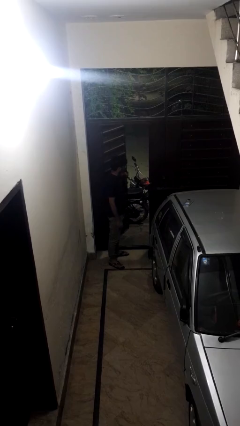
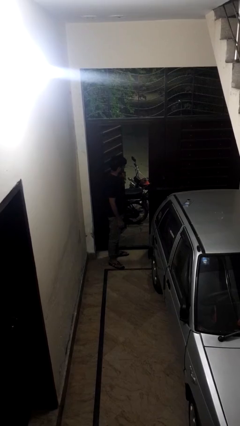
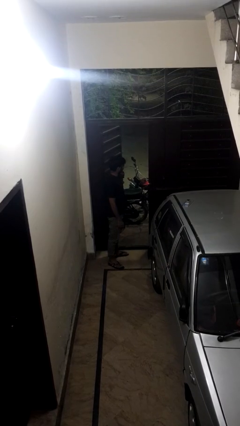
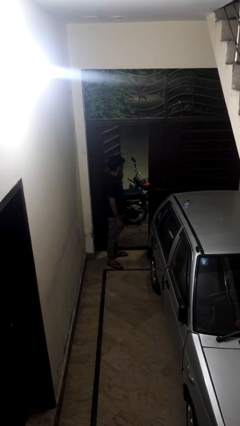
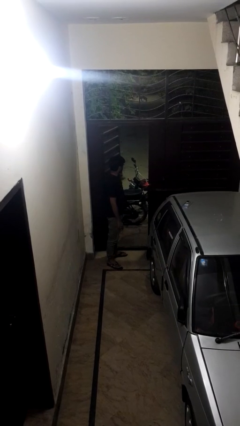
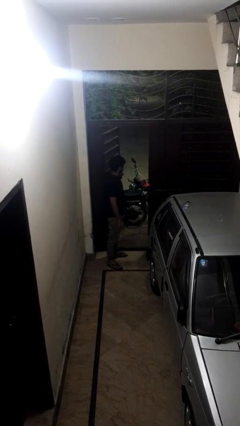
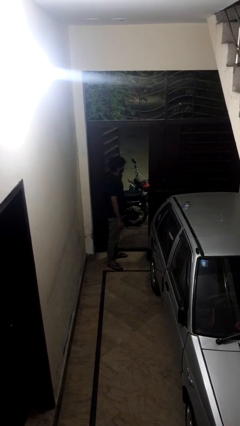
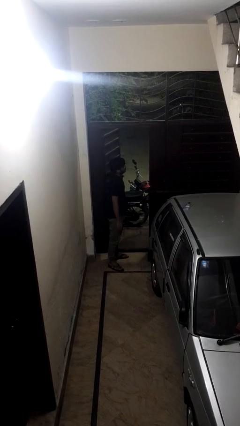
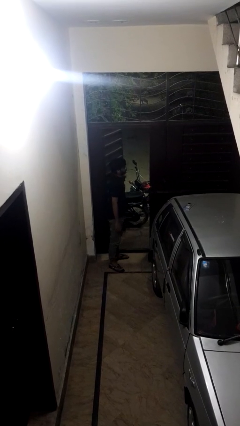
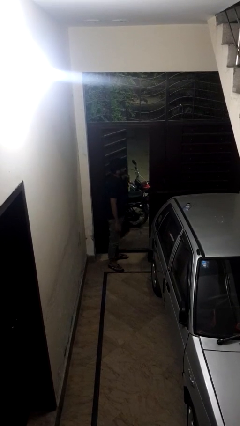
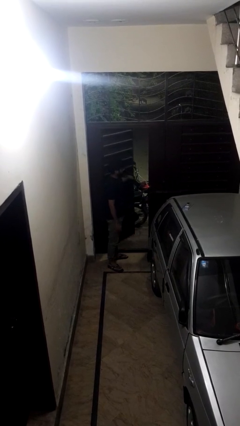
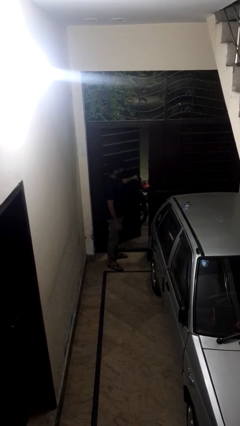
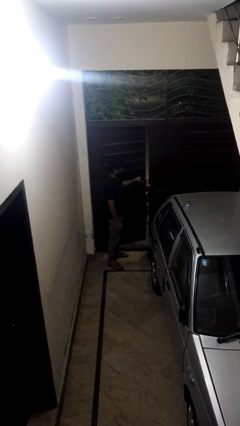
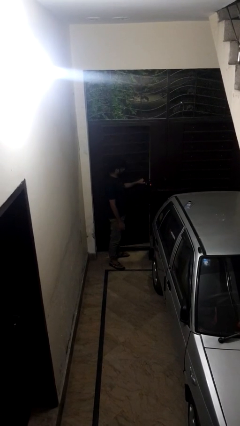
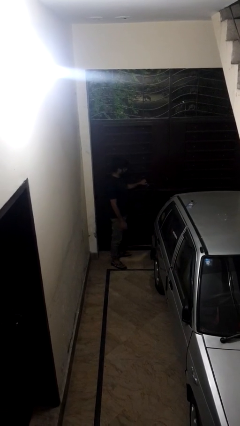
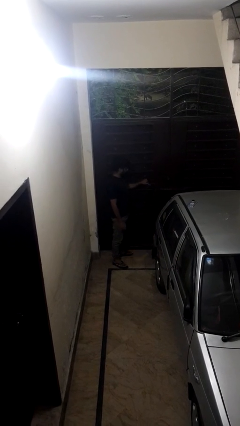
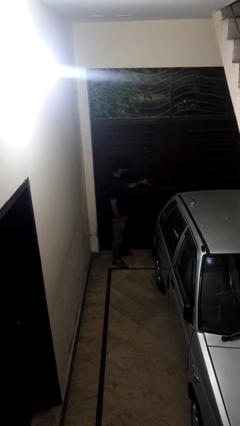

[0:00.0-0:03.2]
person closes gate

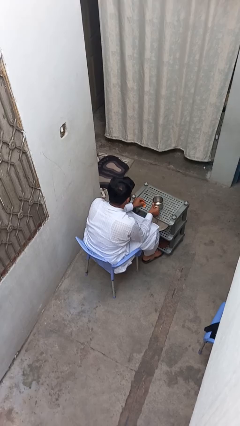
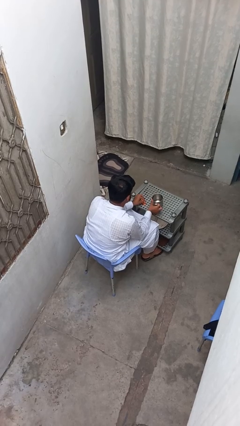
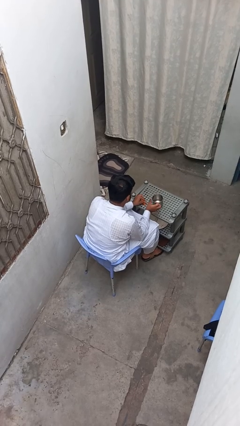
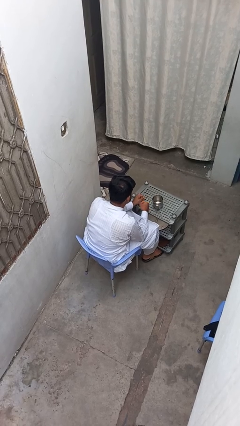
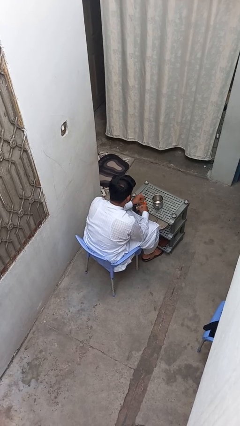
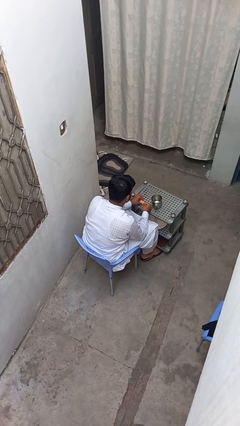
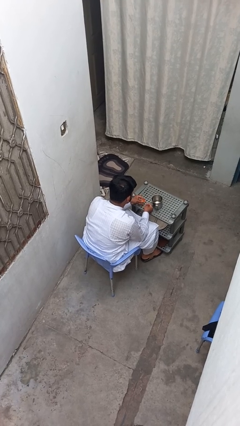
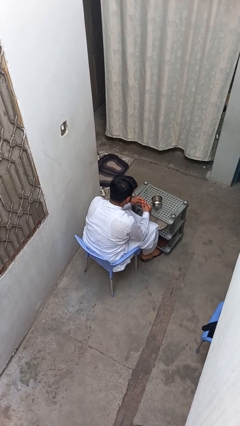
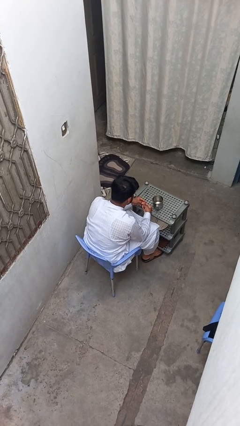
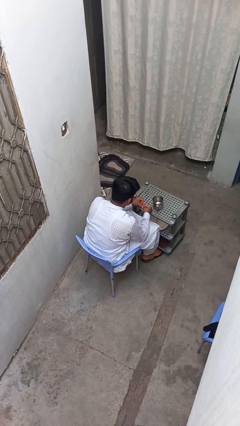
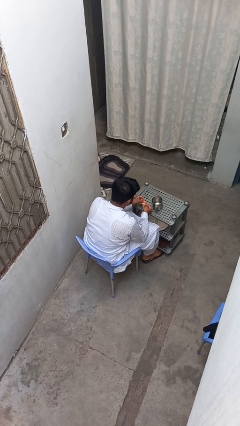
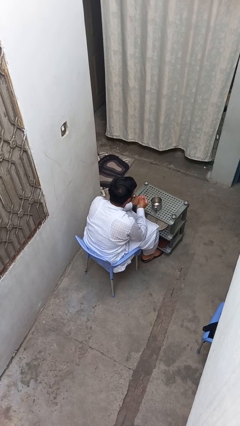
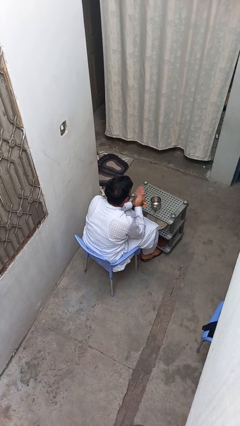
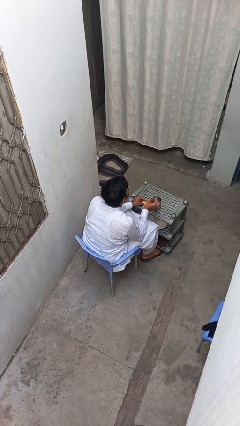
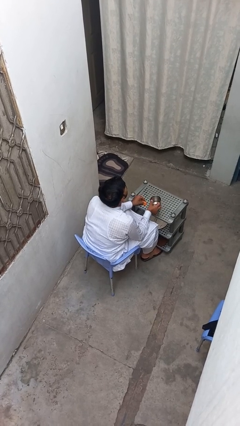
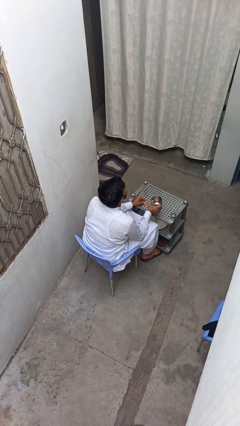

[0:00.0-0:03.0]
person takes medicine pills

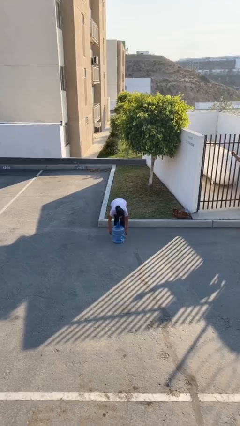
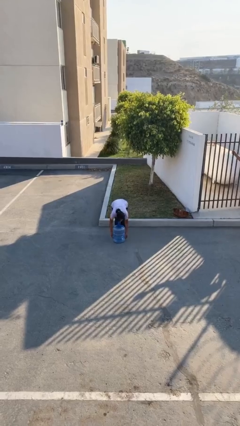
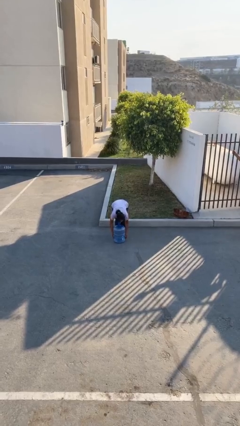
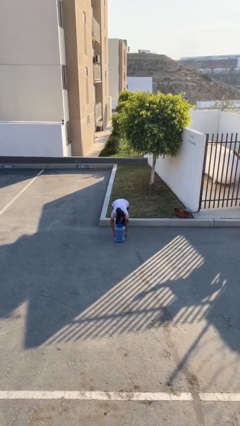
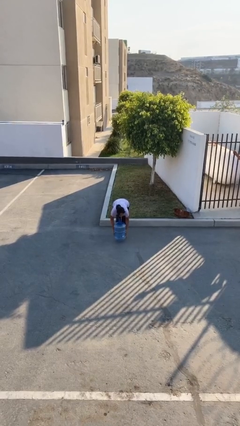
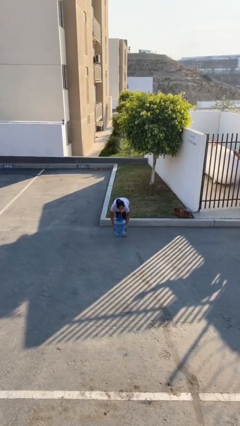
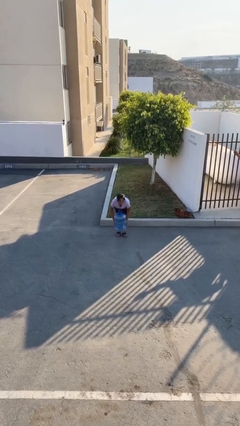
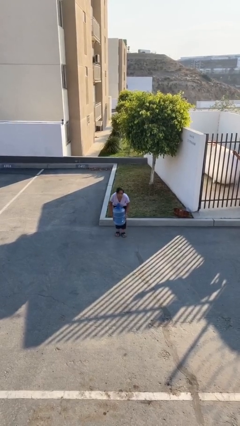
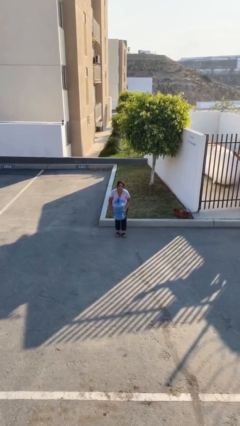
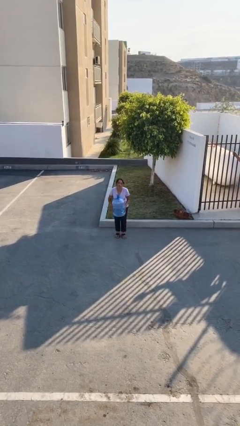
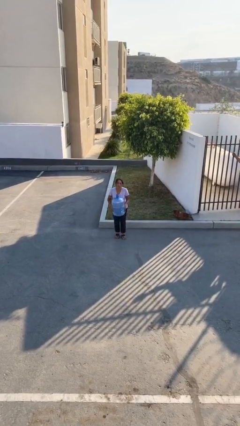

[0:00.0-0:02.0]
person picks up object from floor

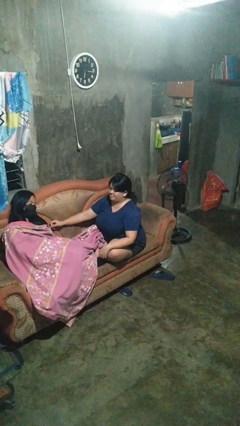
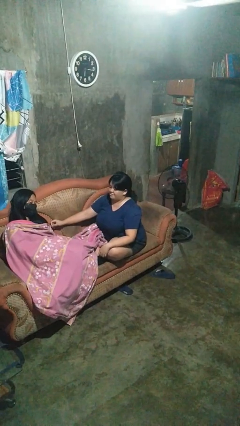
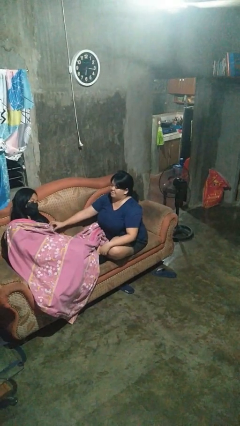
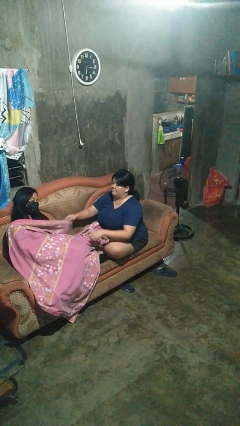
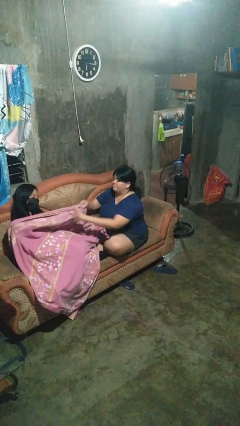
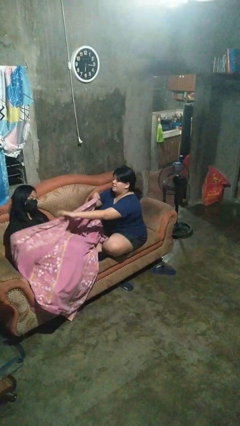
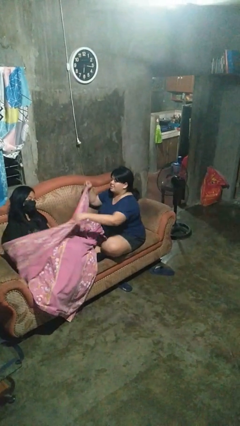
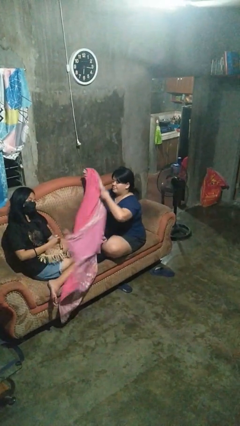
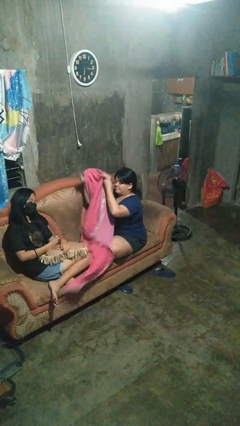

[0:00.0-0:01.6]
person uncovers friend with blanket

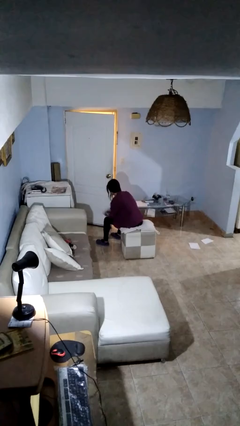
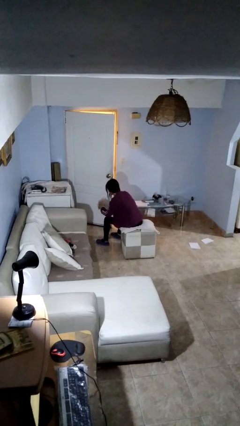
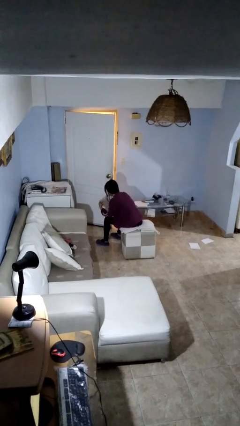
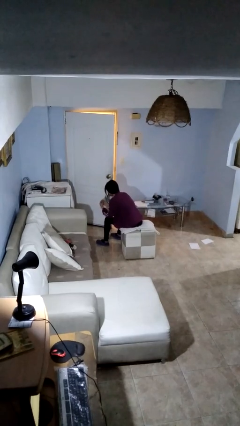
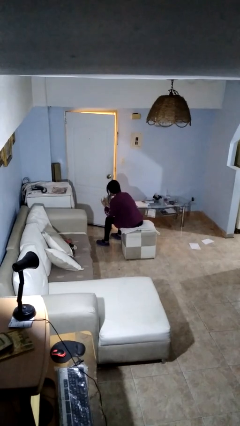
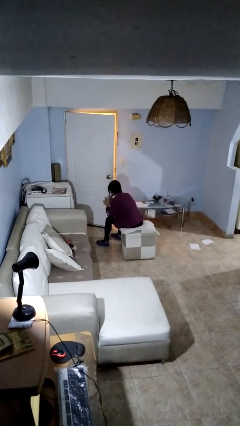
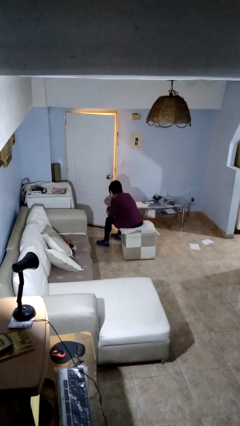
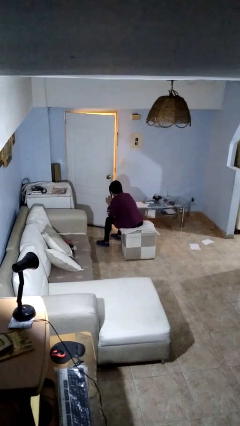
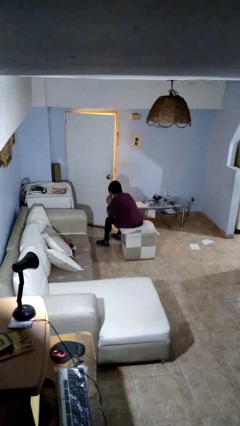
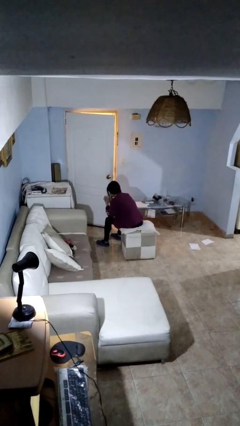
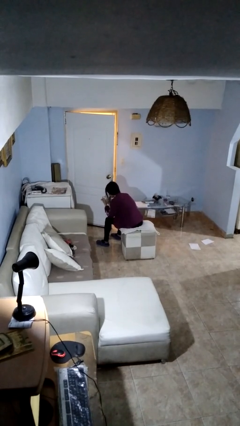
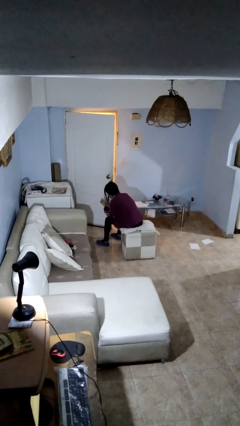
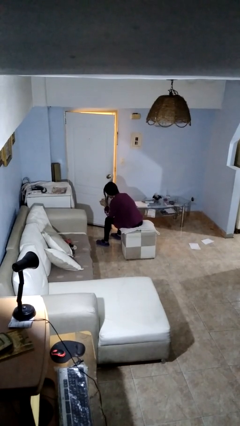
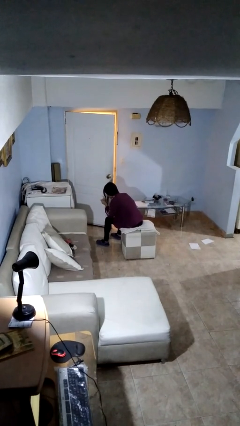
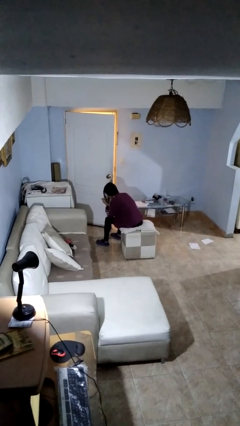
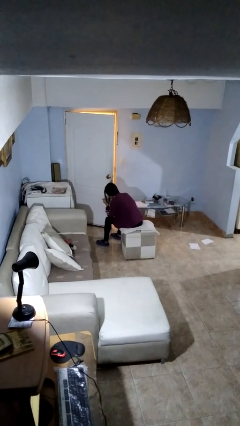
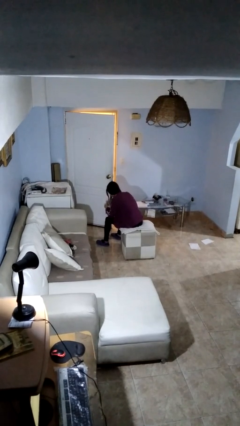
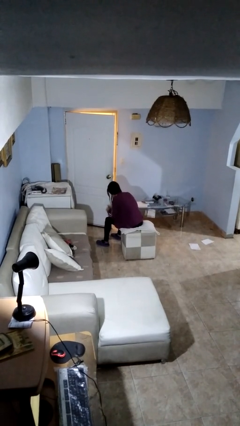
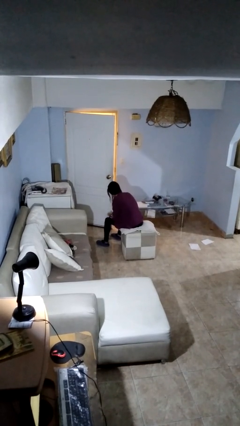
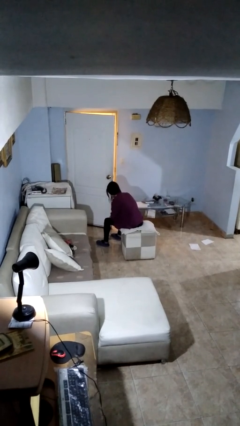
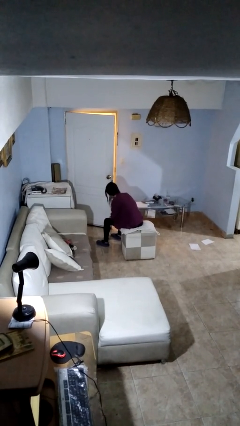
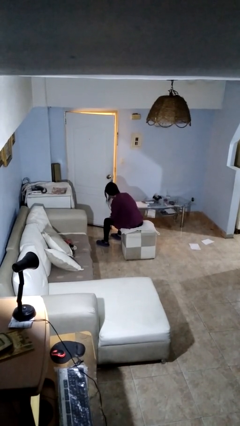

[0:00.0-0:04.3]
person looks at hands in lap

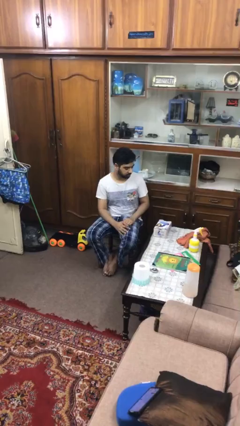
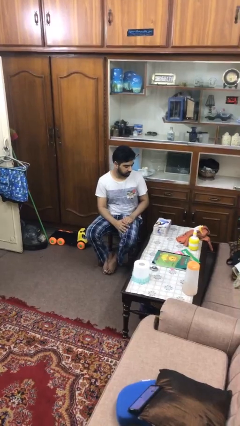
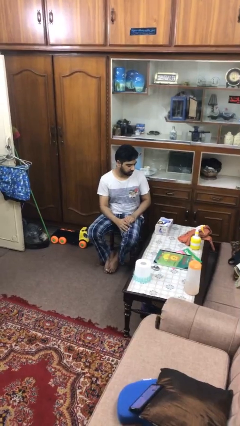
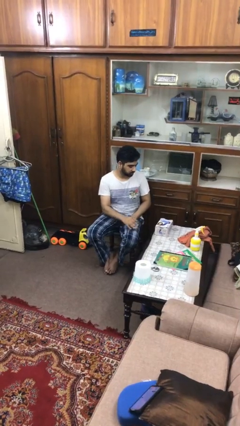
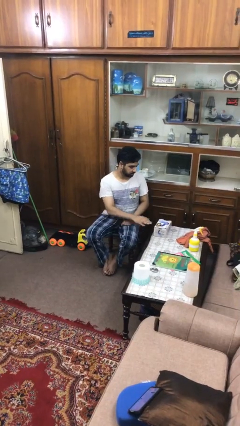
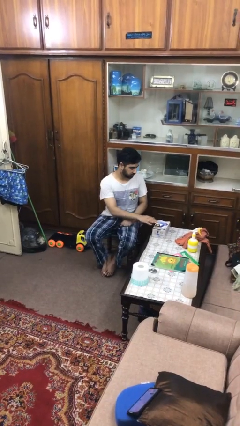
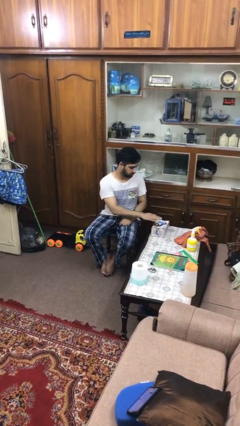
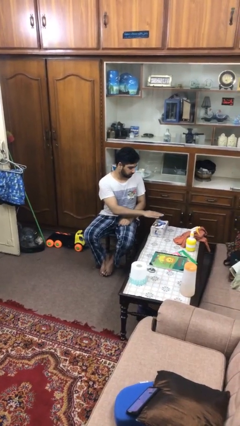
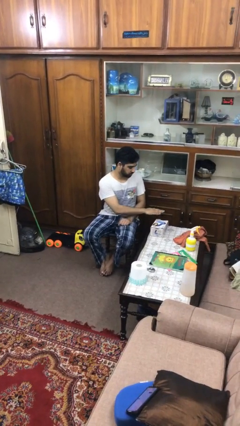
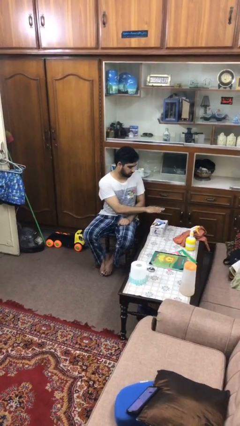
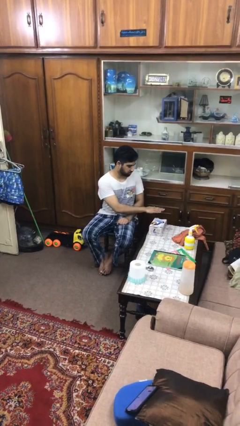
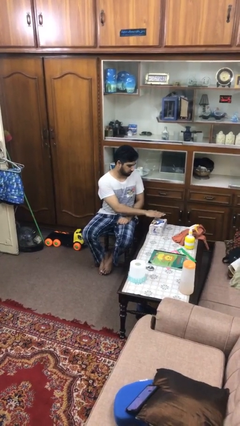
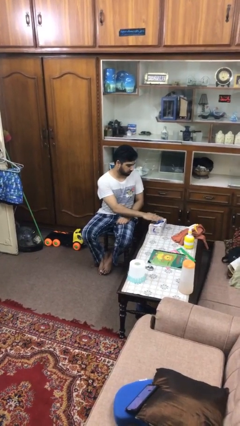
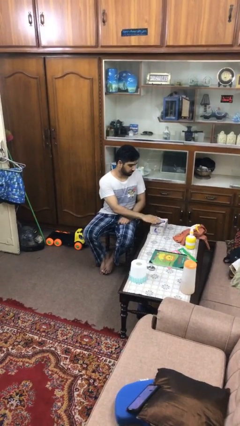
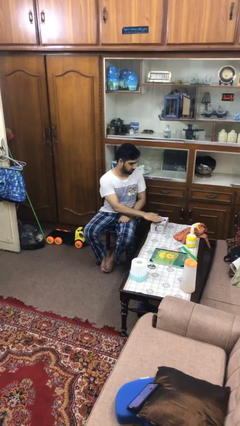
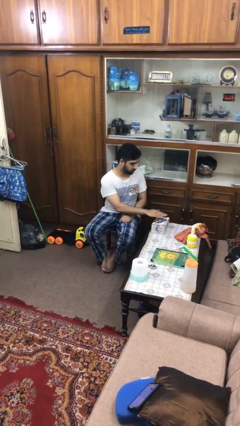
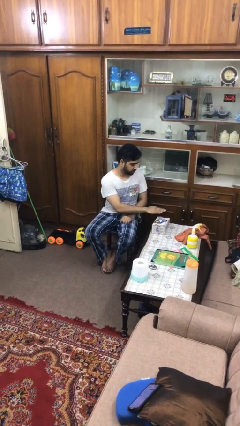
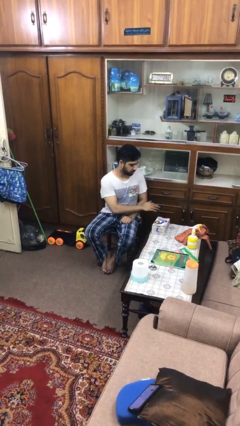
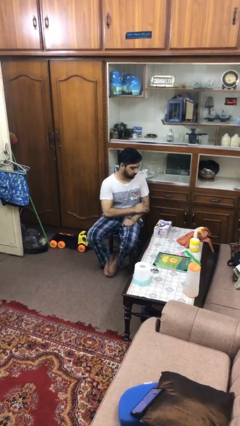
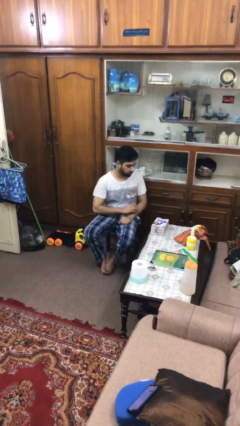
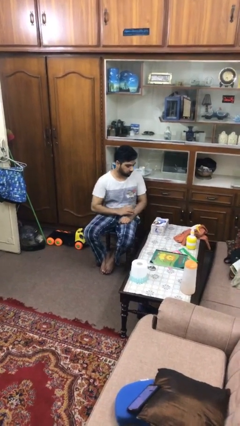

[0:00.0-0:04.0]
person waves hand over object
